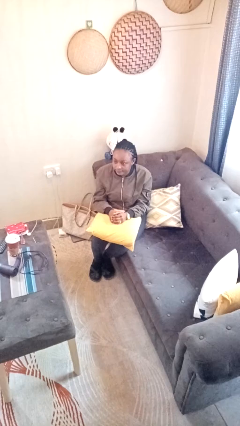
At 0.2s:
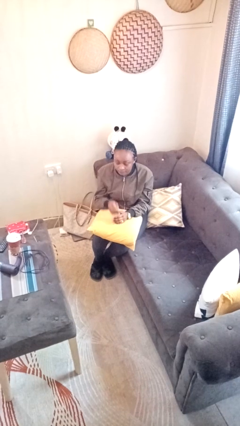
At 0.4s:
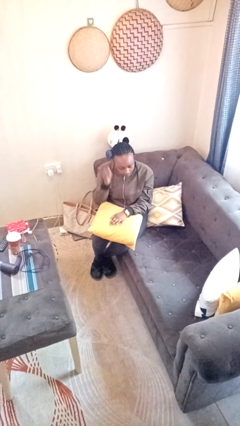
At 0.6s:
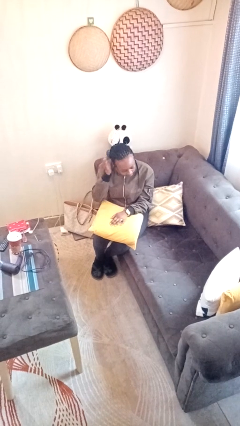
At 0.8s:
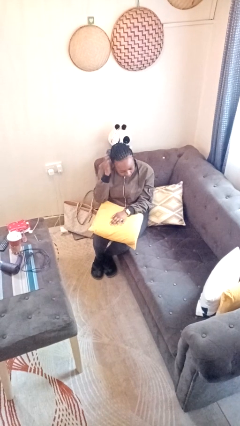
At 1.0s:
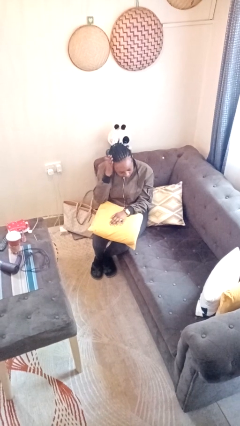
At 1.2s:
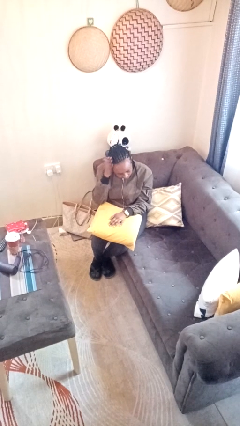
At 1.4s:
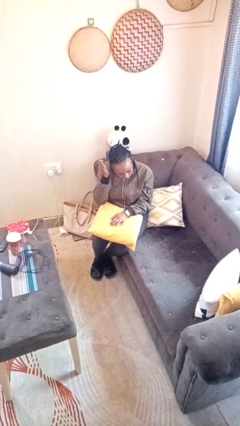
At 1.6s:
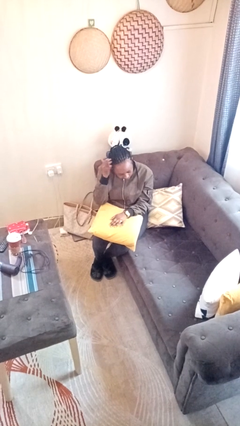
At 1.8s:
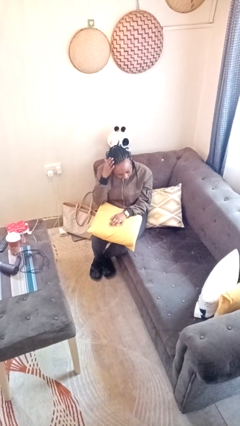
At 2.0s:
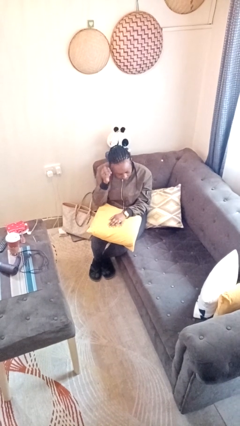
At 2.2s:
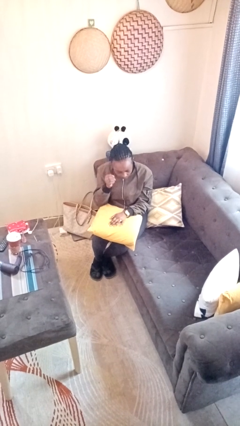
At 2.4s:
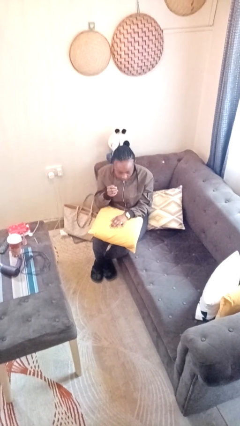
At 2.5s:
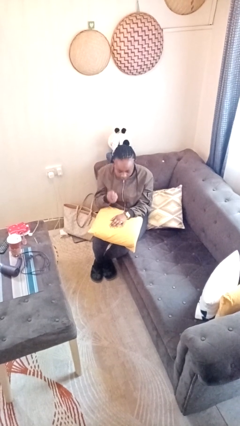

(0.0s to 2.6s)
person pats head

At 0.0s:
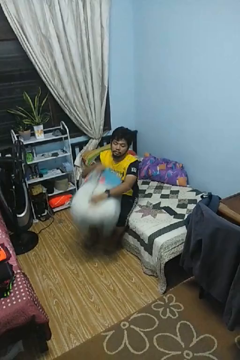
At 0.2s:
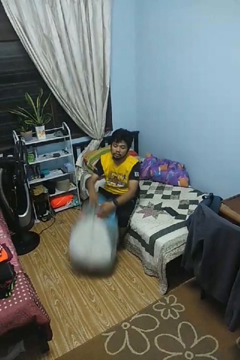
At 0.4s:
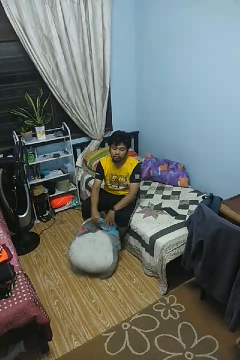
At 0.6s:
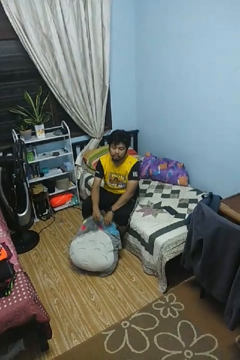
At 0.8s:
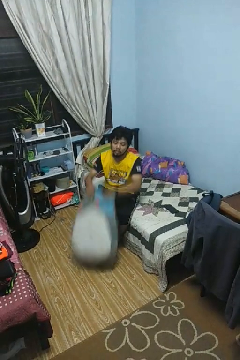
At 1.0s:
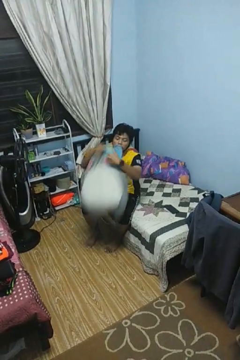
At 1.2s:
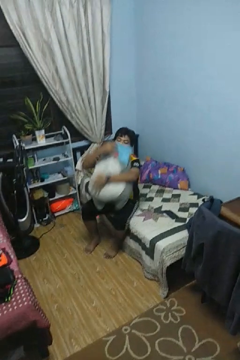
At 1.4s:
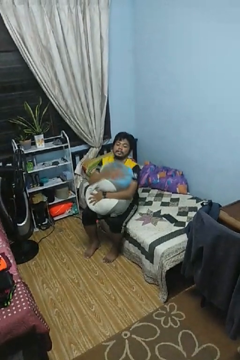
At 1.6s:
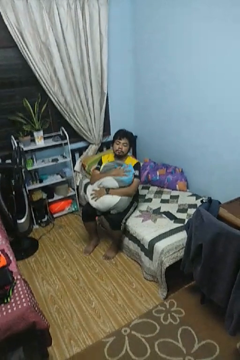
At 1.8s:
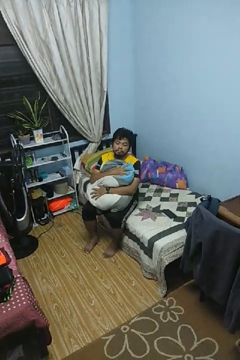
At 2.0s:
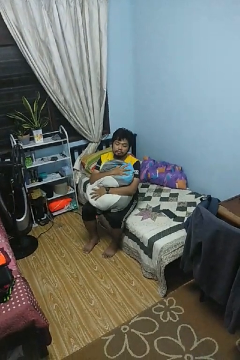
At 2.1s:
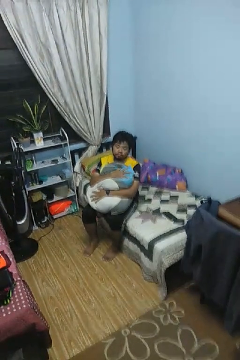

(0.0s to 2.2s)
person hugs stuffed animal

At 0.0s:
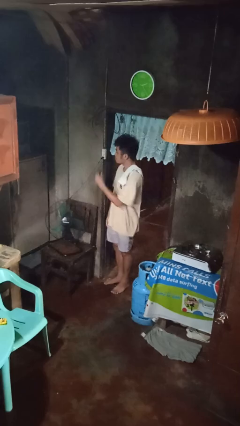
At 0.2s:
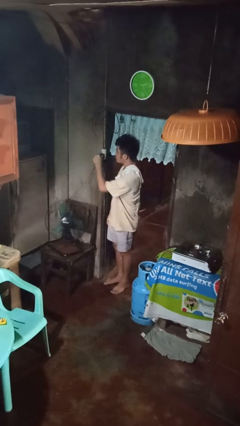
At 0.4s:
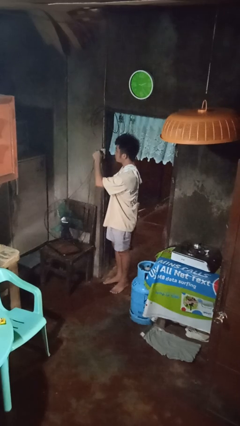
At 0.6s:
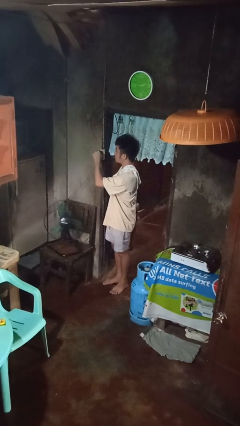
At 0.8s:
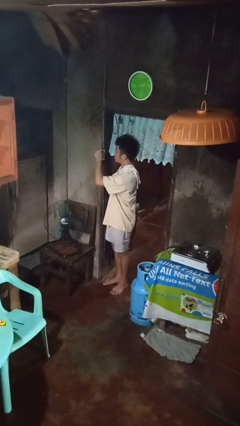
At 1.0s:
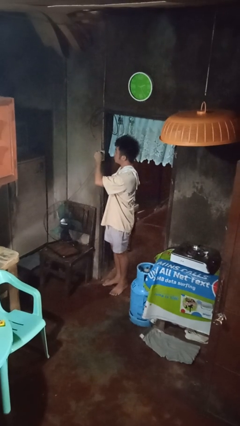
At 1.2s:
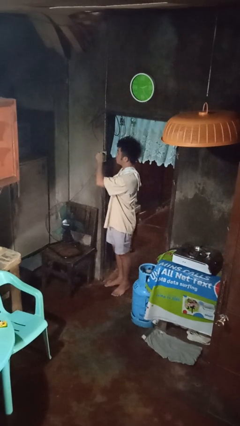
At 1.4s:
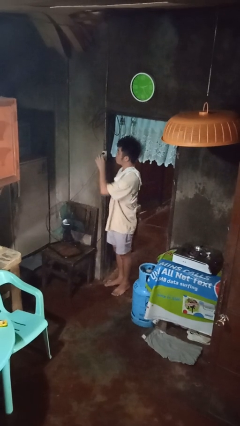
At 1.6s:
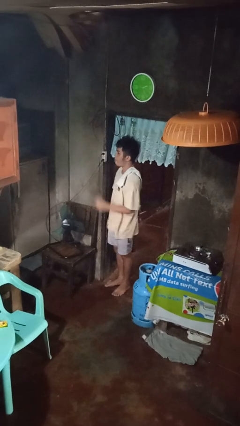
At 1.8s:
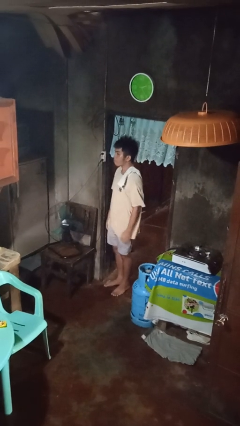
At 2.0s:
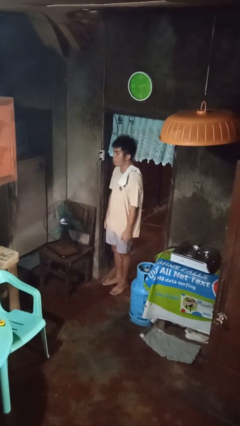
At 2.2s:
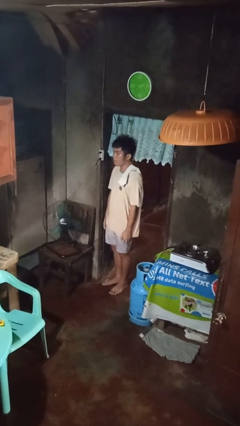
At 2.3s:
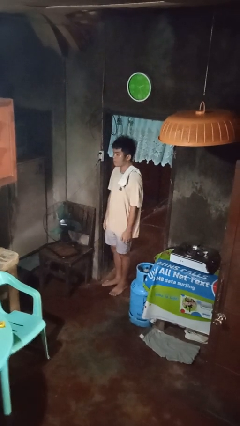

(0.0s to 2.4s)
person plugs into electrical socket

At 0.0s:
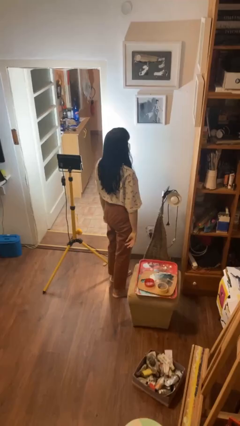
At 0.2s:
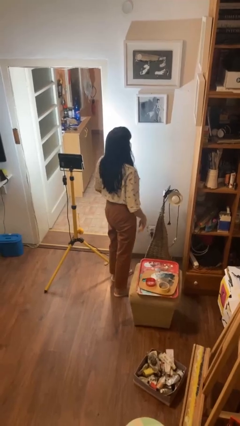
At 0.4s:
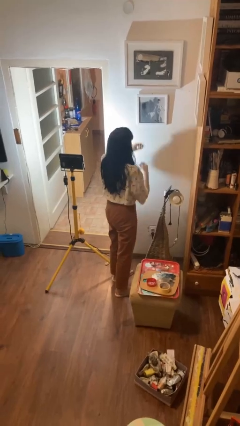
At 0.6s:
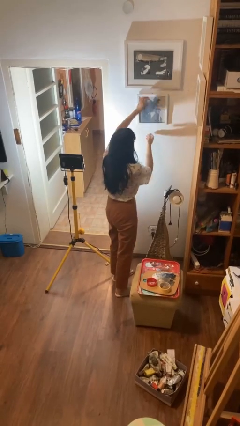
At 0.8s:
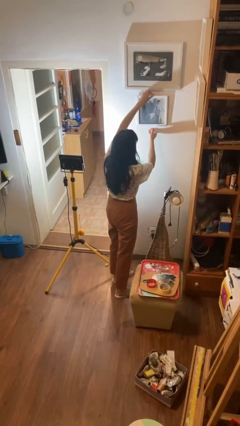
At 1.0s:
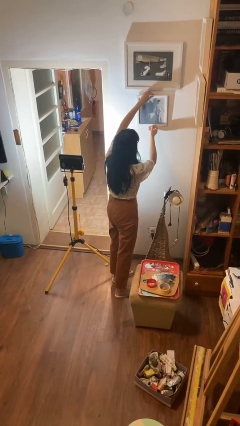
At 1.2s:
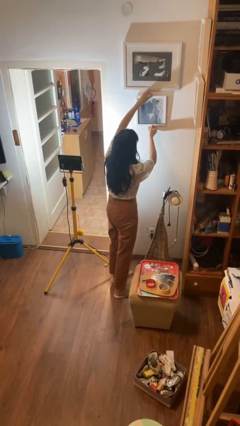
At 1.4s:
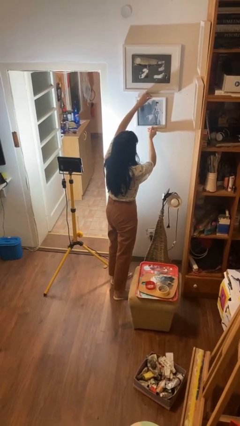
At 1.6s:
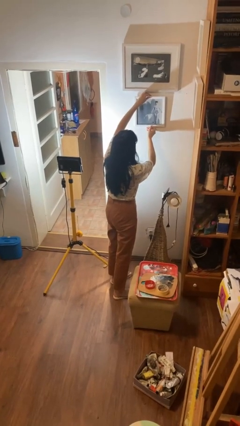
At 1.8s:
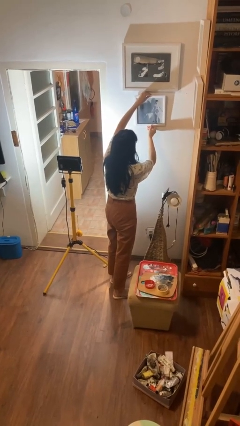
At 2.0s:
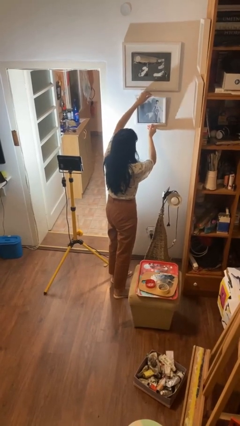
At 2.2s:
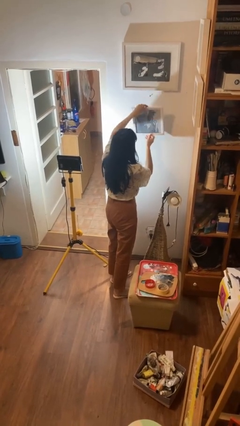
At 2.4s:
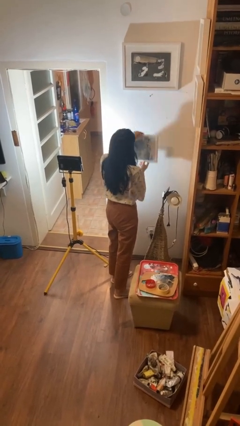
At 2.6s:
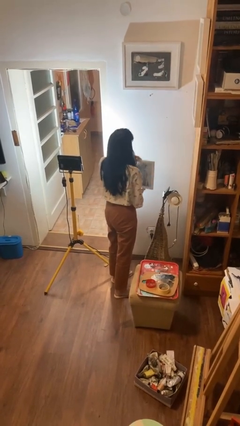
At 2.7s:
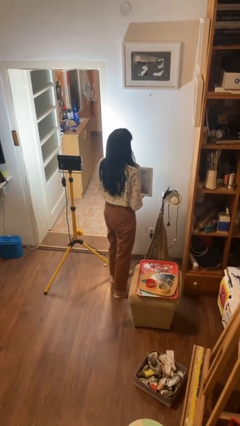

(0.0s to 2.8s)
person takes down picture frame

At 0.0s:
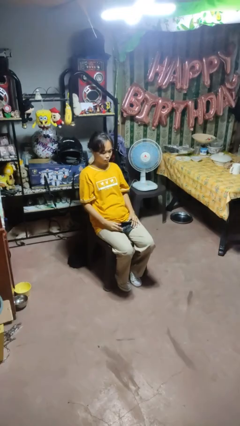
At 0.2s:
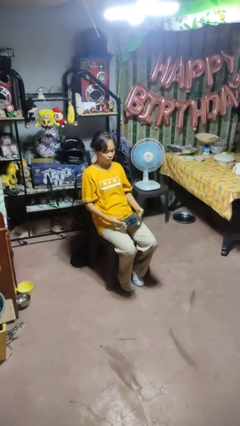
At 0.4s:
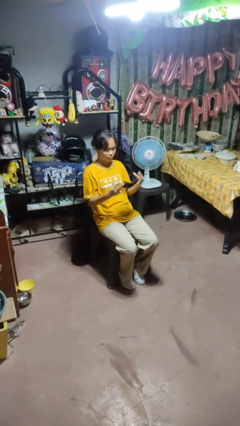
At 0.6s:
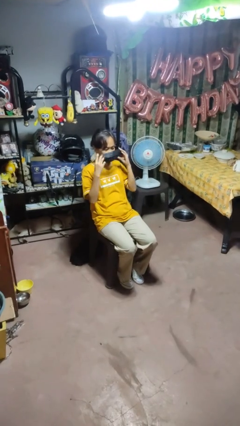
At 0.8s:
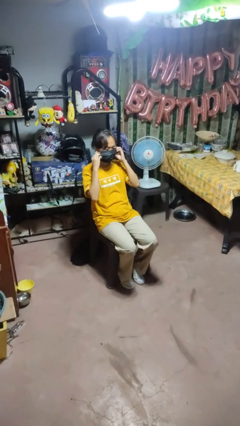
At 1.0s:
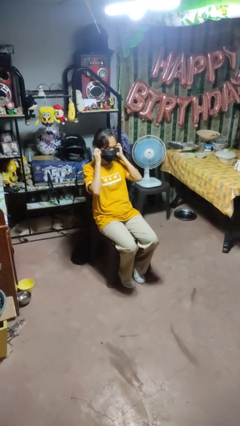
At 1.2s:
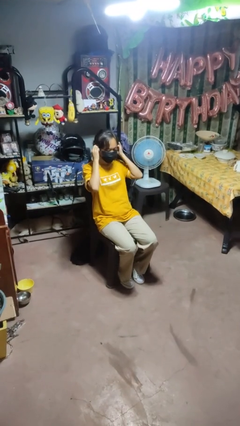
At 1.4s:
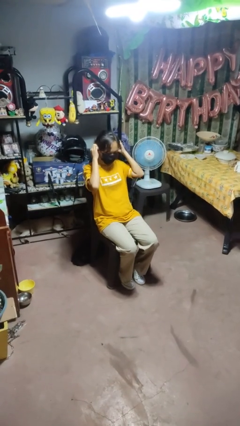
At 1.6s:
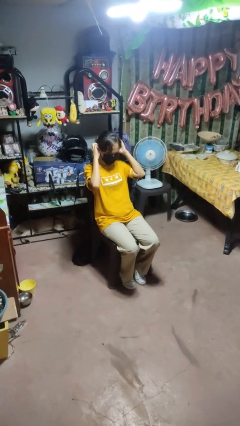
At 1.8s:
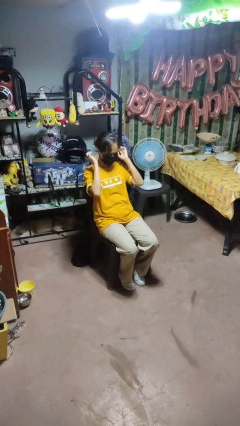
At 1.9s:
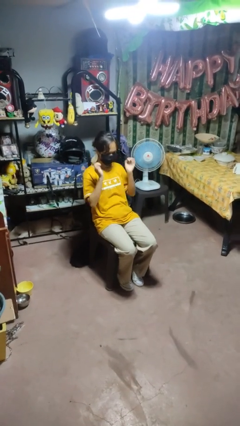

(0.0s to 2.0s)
person puts on facemask

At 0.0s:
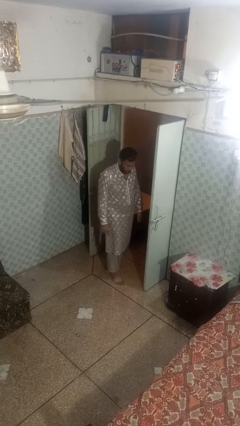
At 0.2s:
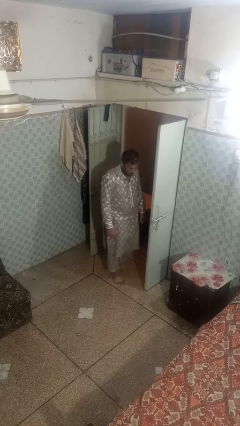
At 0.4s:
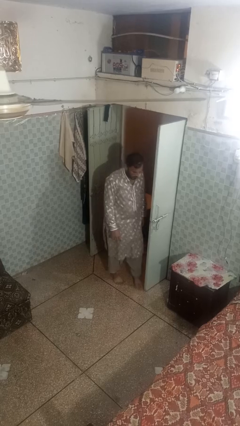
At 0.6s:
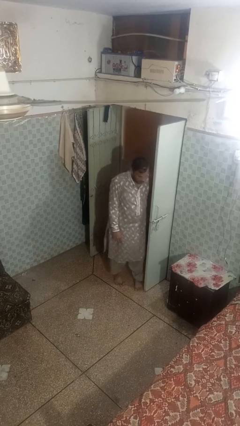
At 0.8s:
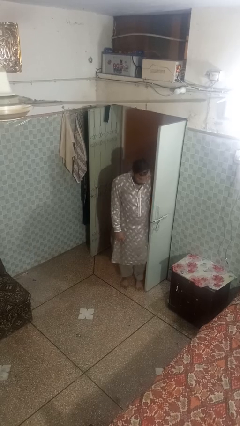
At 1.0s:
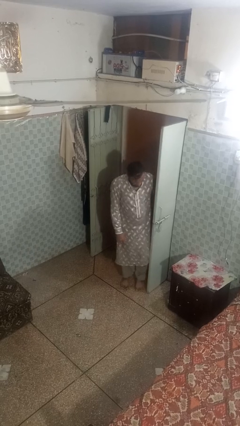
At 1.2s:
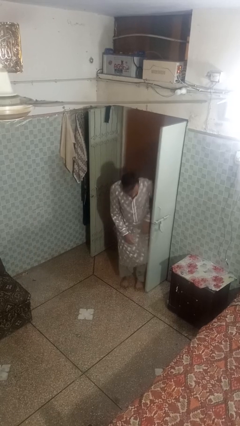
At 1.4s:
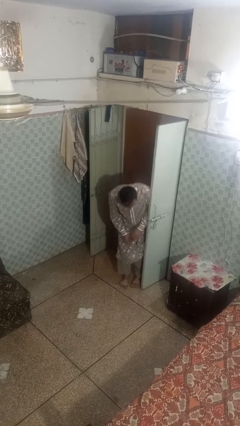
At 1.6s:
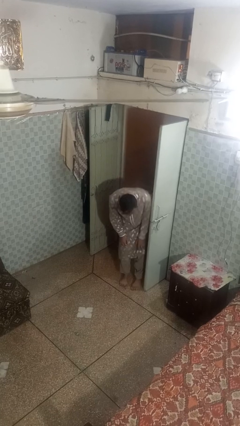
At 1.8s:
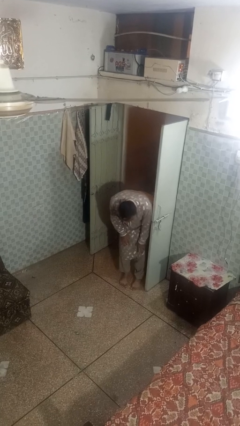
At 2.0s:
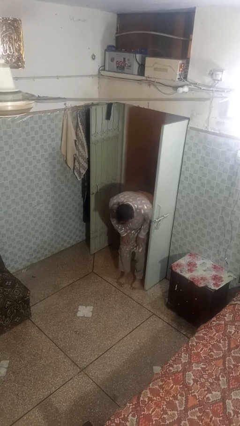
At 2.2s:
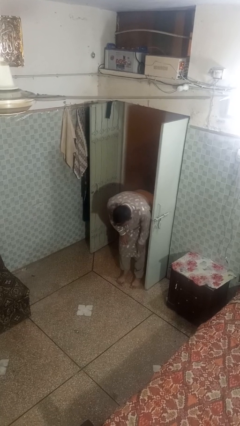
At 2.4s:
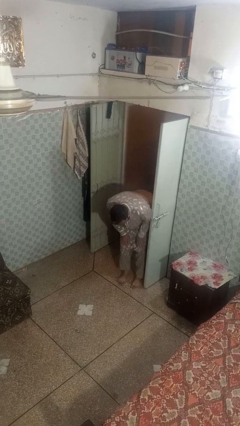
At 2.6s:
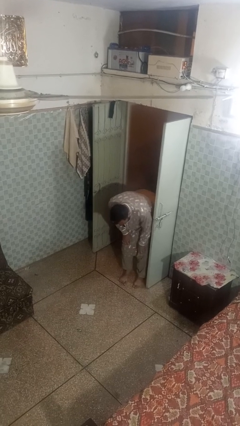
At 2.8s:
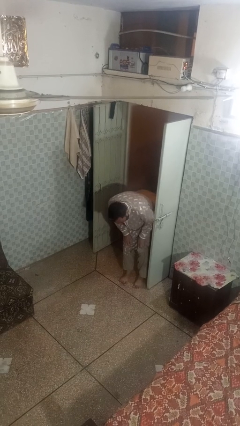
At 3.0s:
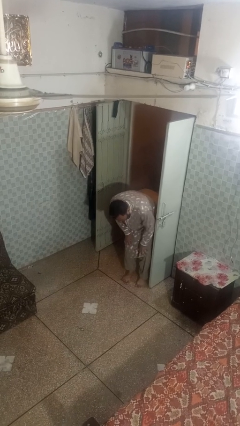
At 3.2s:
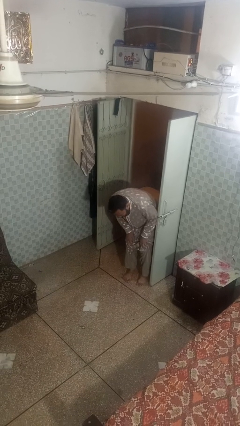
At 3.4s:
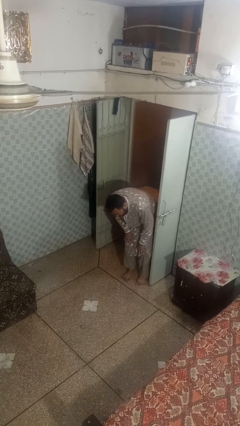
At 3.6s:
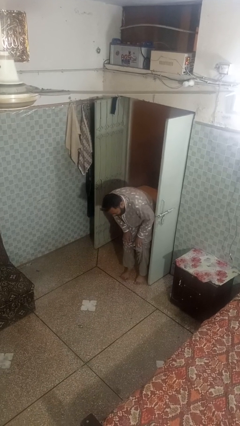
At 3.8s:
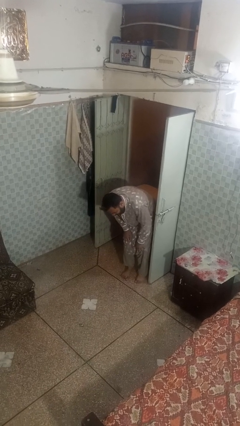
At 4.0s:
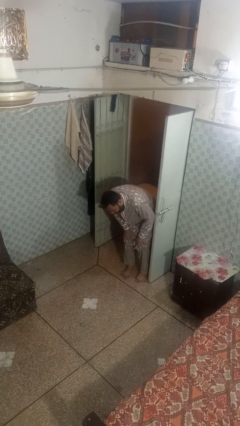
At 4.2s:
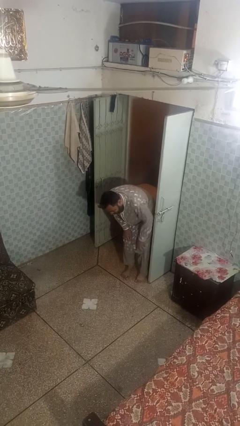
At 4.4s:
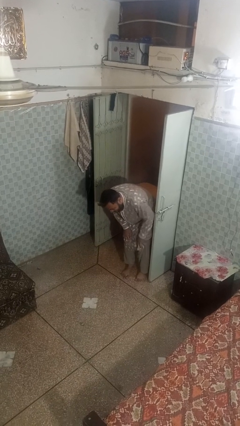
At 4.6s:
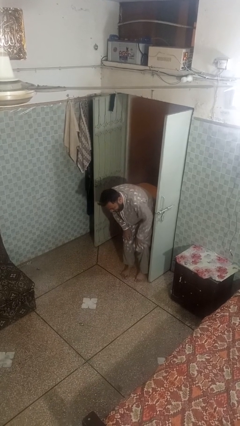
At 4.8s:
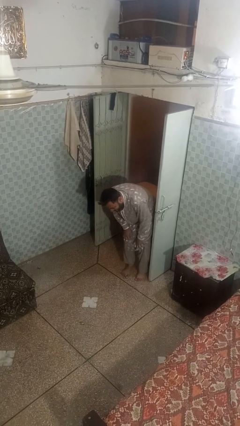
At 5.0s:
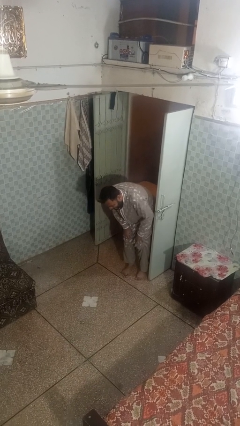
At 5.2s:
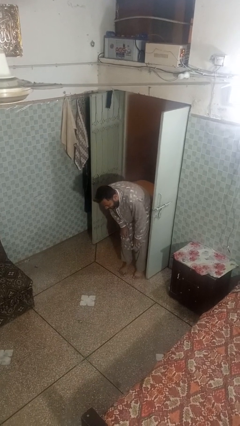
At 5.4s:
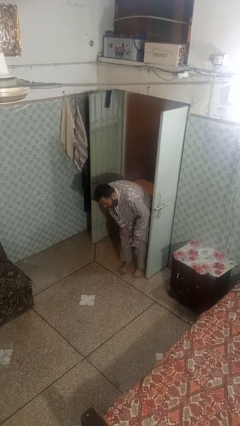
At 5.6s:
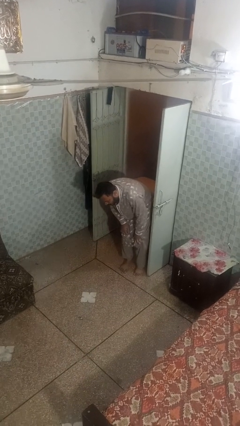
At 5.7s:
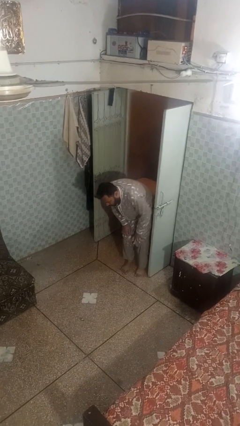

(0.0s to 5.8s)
person trips on object on floor

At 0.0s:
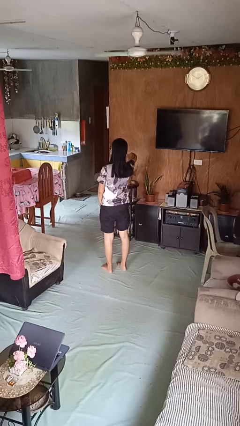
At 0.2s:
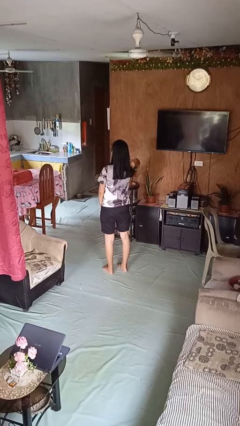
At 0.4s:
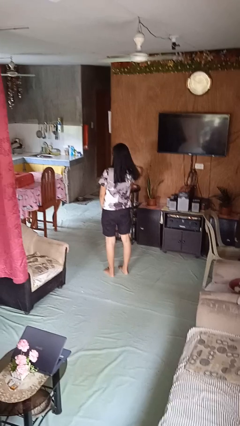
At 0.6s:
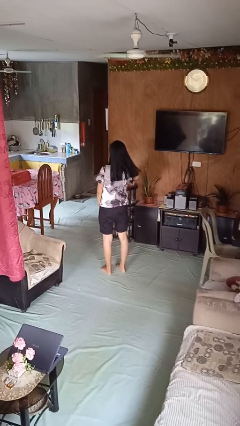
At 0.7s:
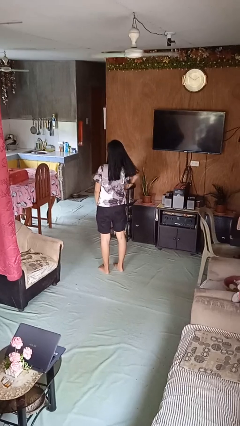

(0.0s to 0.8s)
person strokes hair
